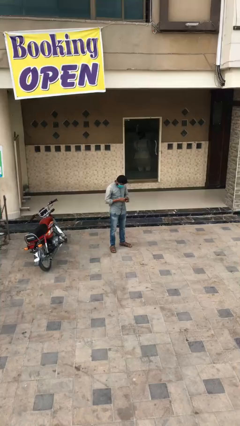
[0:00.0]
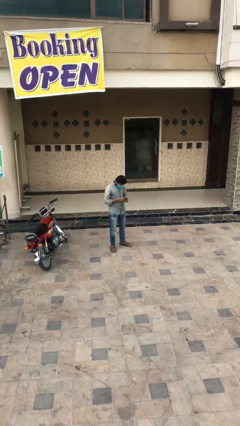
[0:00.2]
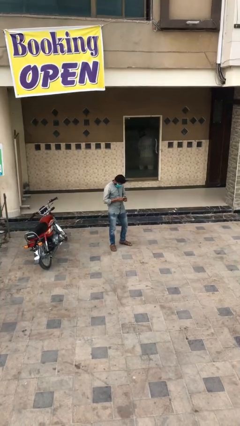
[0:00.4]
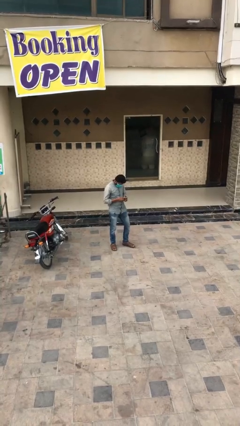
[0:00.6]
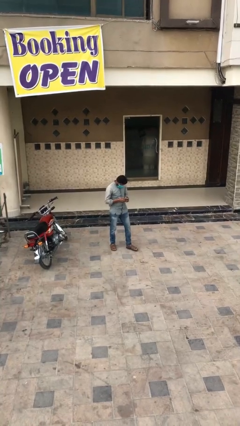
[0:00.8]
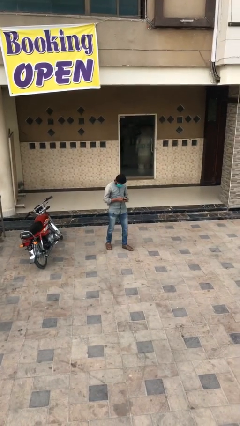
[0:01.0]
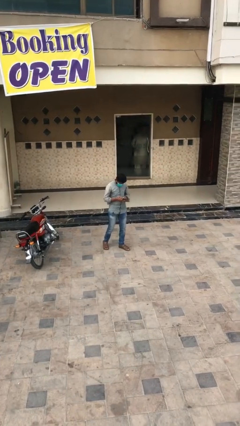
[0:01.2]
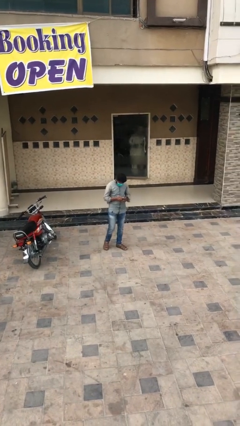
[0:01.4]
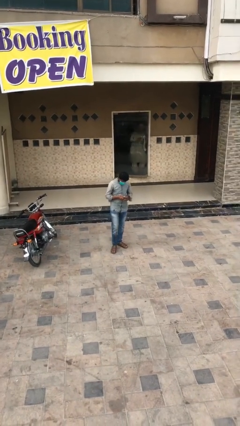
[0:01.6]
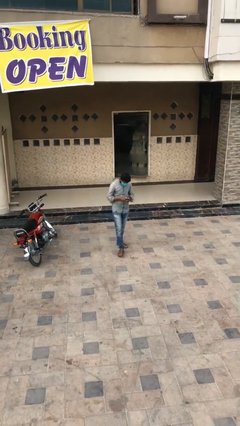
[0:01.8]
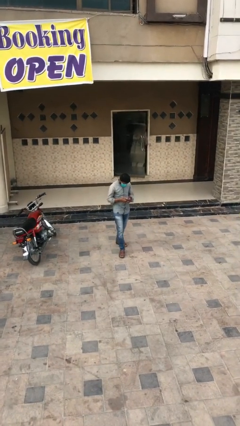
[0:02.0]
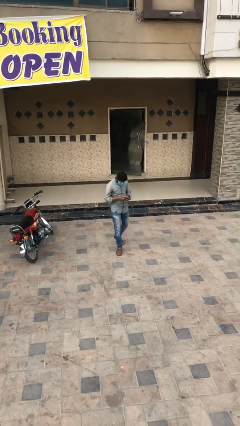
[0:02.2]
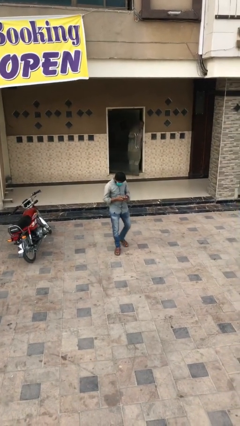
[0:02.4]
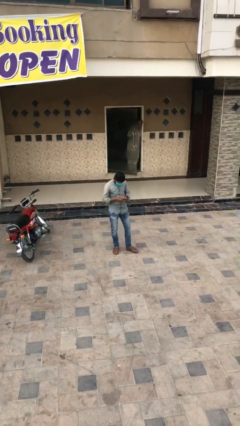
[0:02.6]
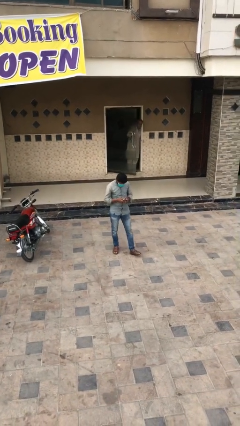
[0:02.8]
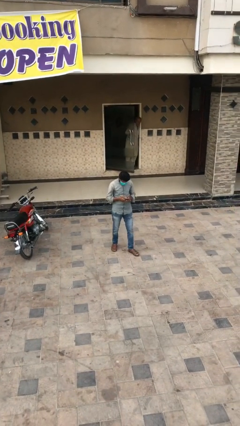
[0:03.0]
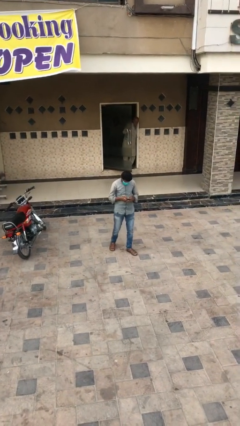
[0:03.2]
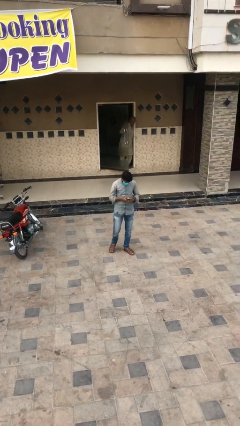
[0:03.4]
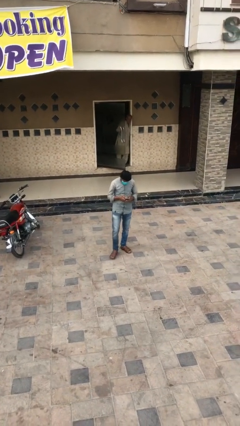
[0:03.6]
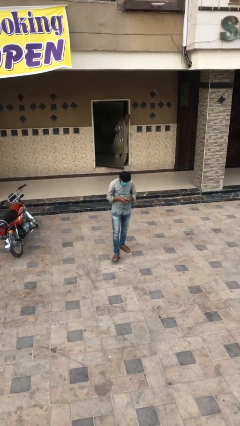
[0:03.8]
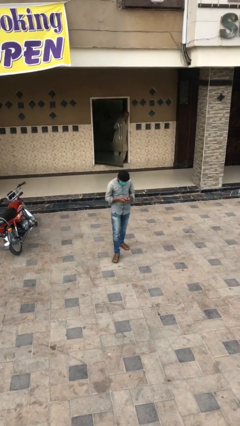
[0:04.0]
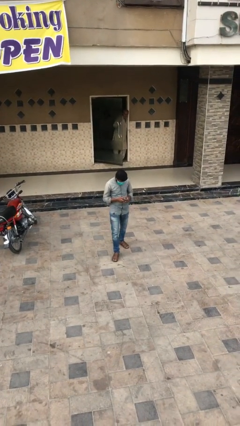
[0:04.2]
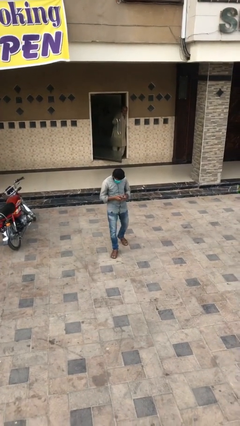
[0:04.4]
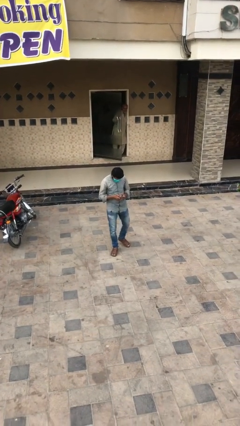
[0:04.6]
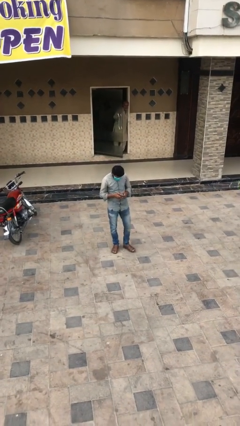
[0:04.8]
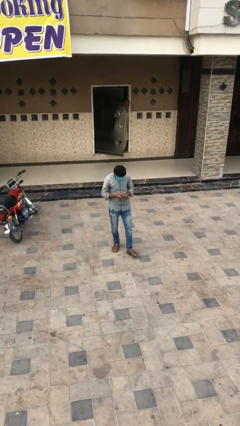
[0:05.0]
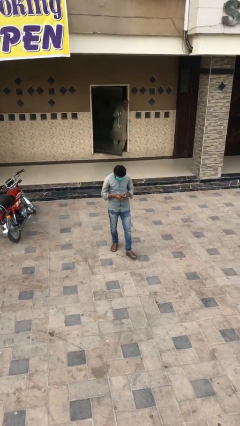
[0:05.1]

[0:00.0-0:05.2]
person texts on phone

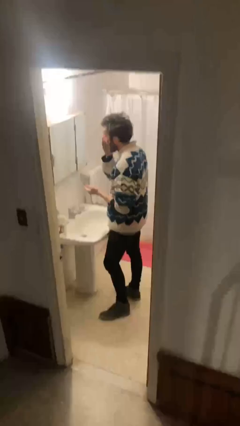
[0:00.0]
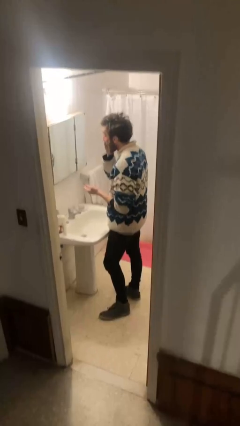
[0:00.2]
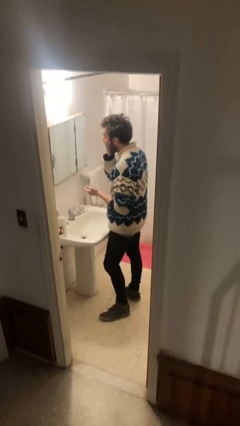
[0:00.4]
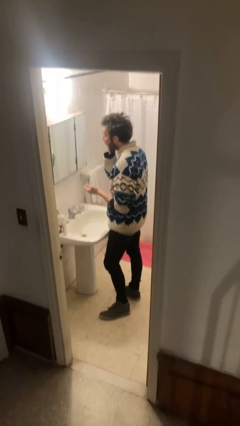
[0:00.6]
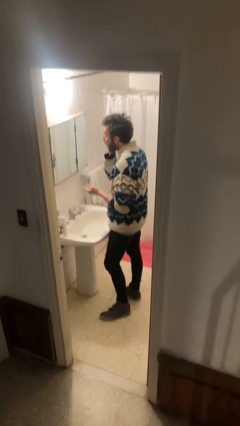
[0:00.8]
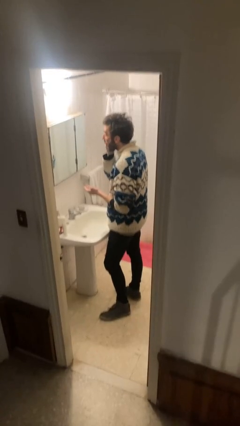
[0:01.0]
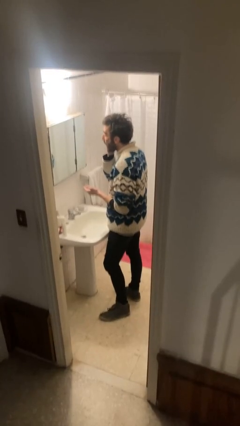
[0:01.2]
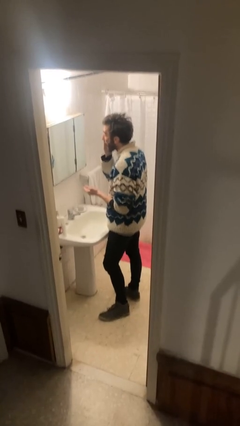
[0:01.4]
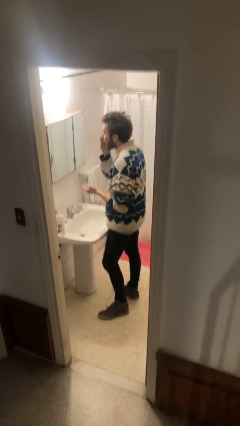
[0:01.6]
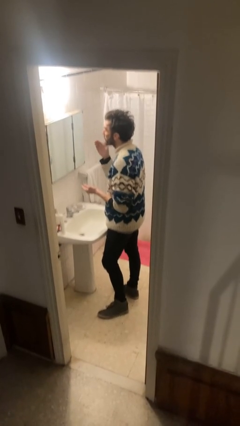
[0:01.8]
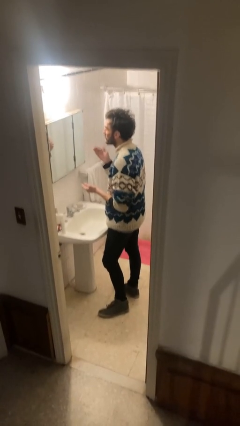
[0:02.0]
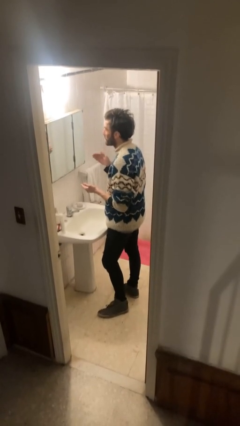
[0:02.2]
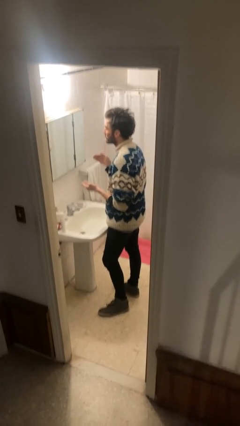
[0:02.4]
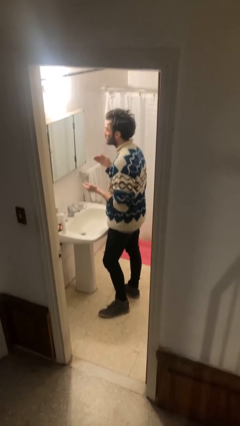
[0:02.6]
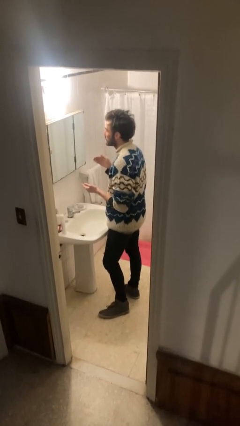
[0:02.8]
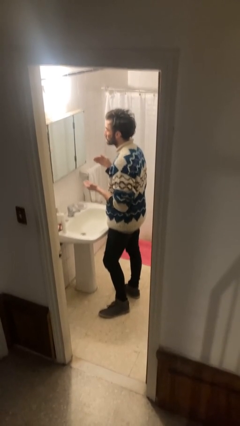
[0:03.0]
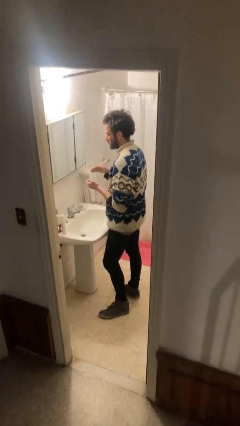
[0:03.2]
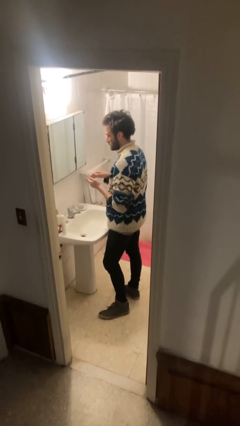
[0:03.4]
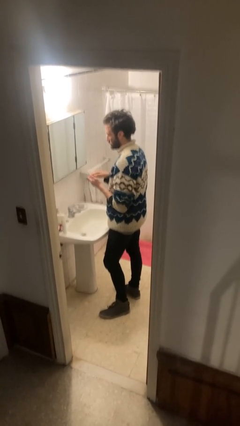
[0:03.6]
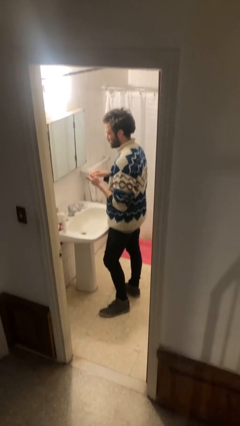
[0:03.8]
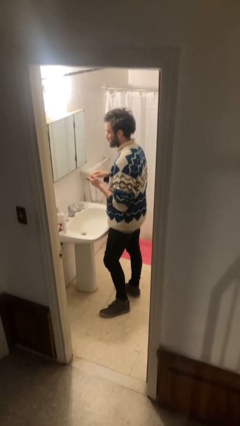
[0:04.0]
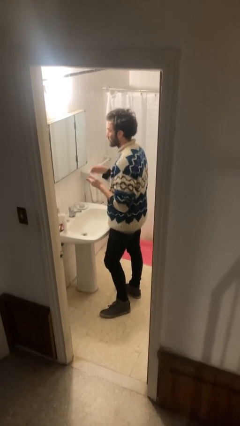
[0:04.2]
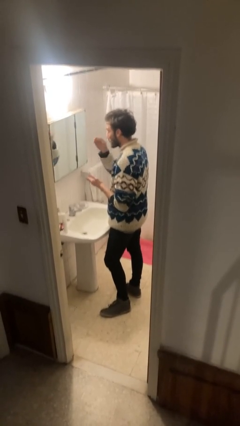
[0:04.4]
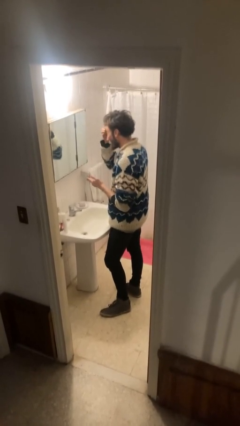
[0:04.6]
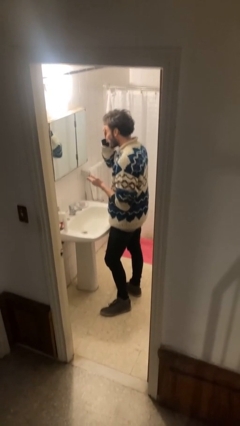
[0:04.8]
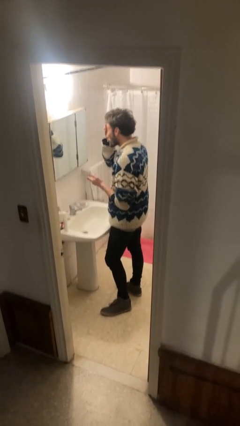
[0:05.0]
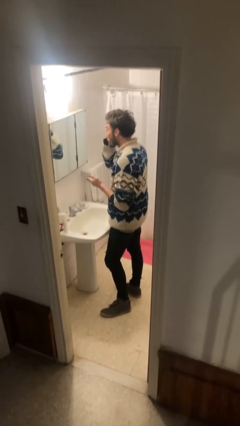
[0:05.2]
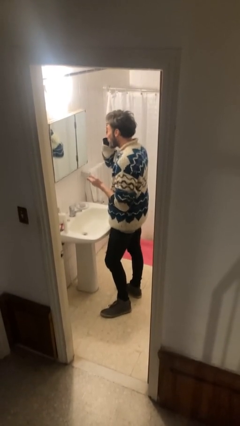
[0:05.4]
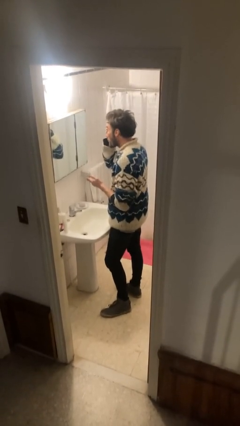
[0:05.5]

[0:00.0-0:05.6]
person applies foundation makeup

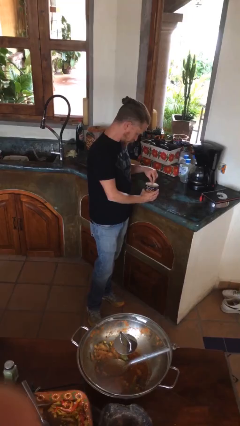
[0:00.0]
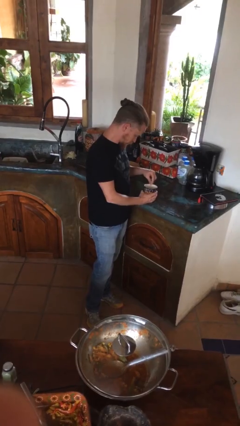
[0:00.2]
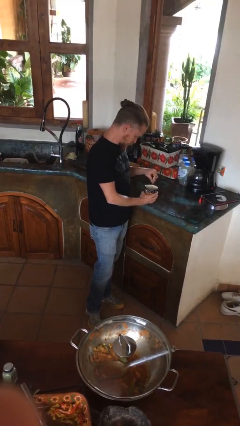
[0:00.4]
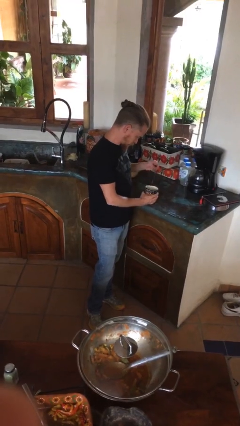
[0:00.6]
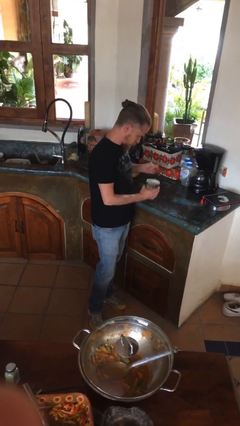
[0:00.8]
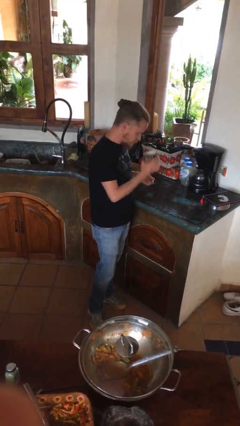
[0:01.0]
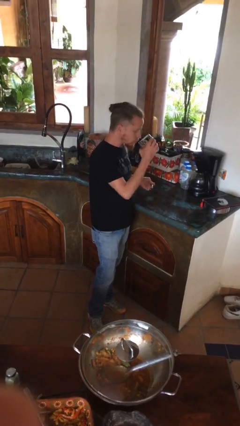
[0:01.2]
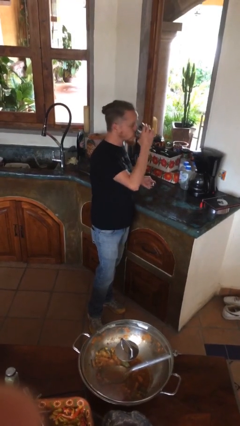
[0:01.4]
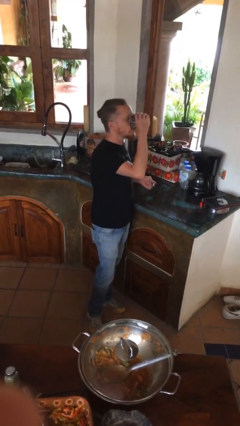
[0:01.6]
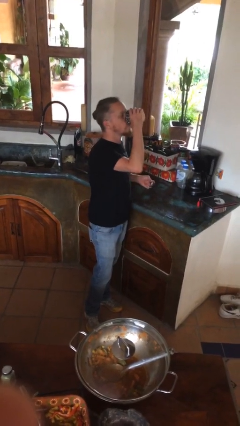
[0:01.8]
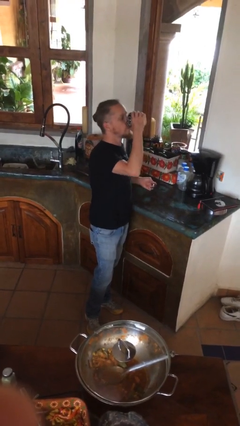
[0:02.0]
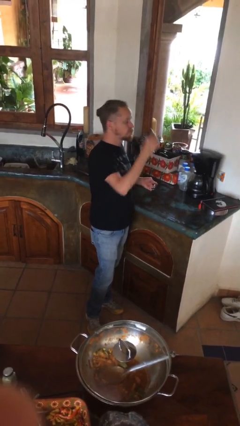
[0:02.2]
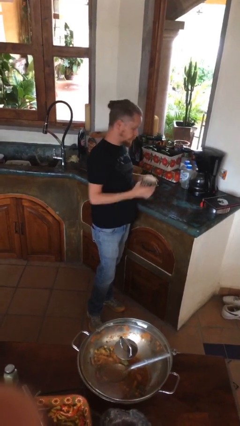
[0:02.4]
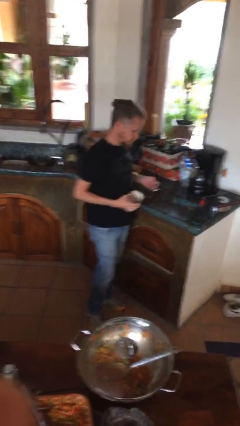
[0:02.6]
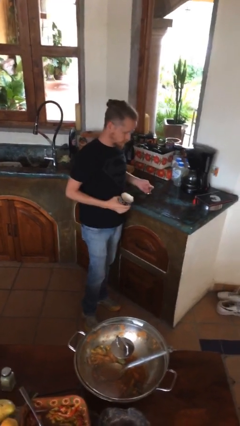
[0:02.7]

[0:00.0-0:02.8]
person drinks from mug

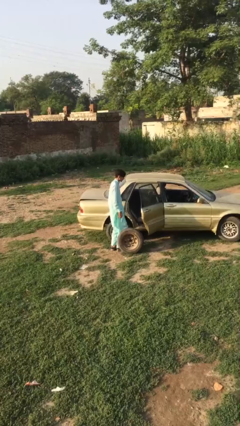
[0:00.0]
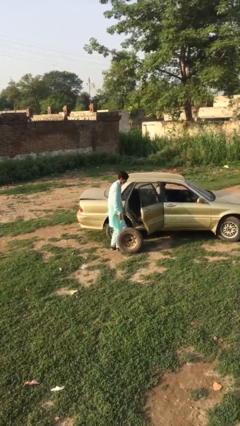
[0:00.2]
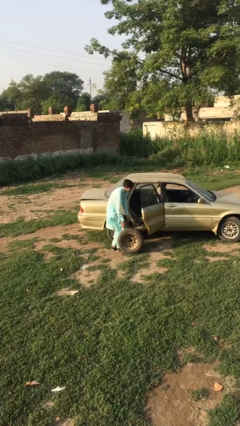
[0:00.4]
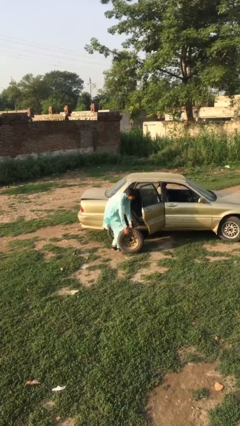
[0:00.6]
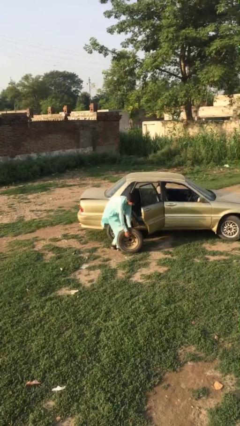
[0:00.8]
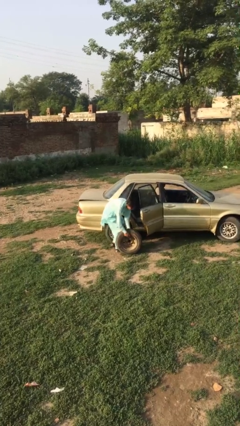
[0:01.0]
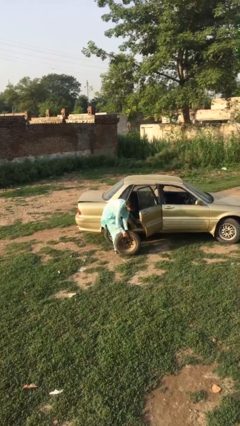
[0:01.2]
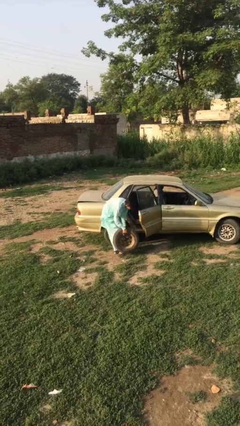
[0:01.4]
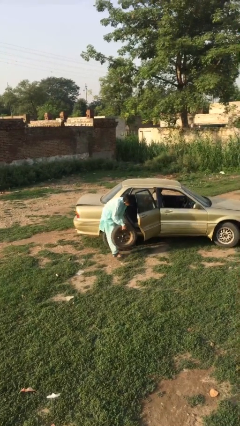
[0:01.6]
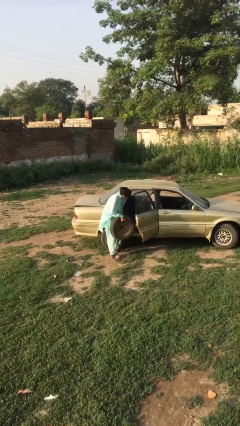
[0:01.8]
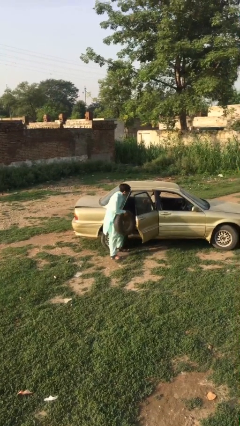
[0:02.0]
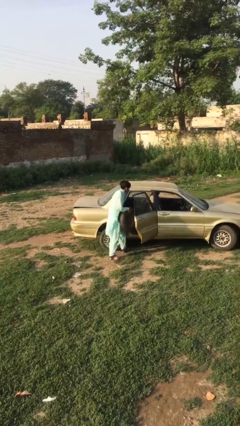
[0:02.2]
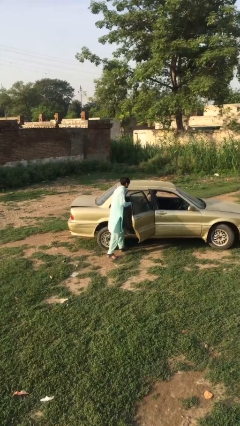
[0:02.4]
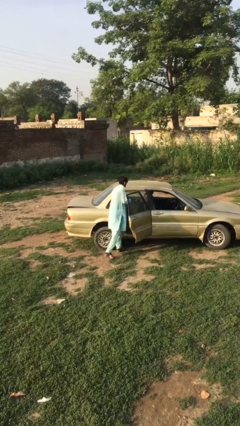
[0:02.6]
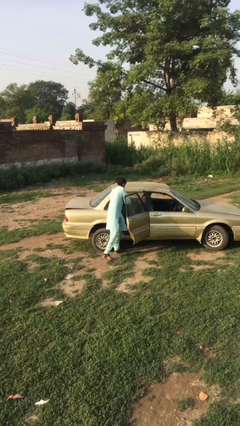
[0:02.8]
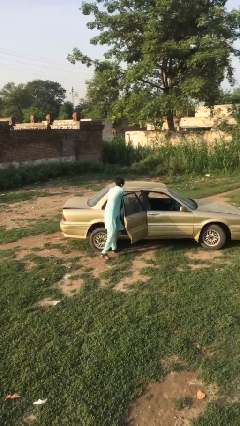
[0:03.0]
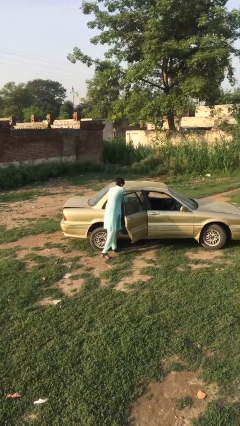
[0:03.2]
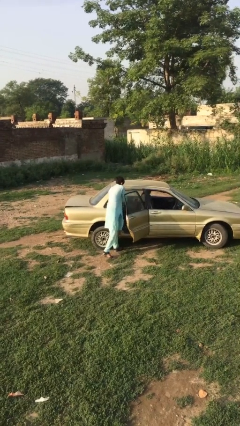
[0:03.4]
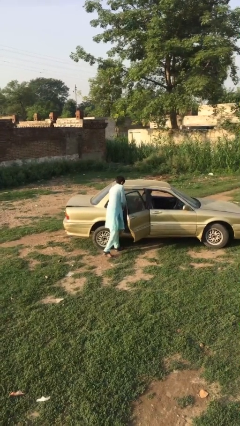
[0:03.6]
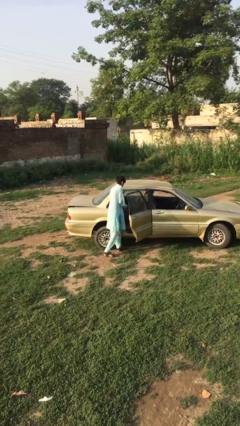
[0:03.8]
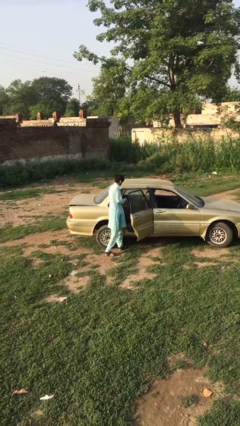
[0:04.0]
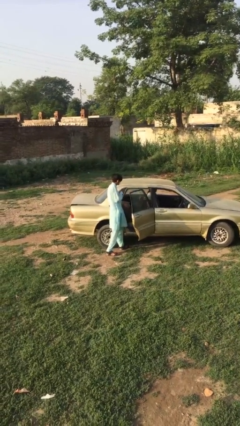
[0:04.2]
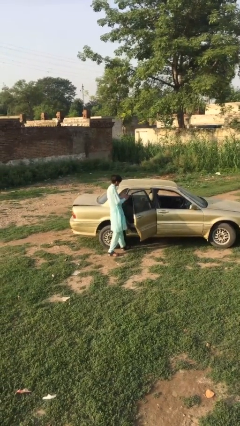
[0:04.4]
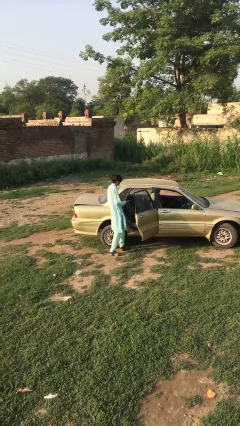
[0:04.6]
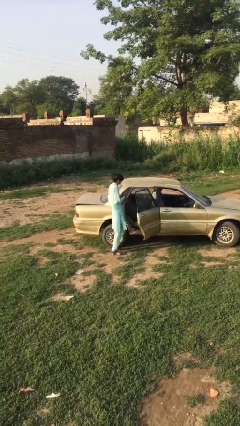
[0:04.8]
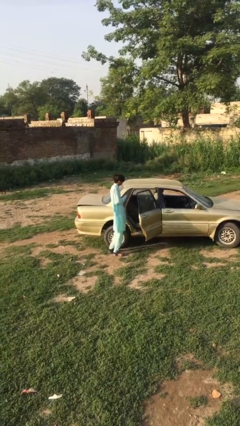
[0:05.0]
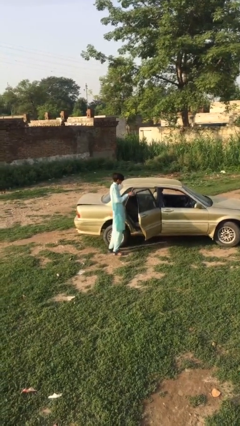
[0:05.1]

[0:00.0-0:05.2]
person loads car
